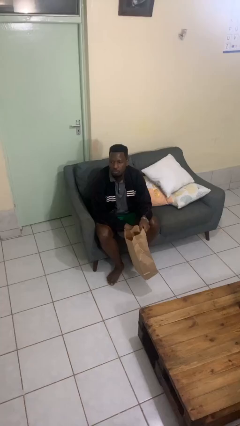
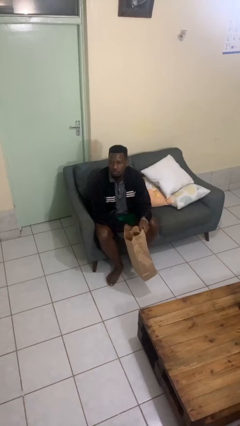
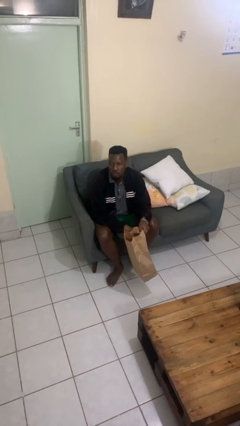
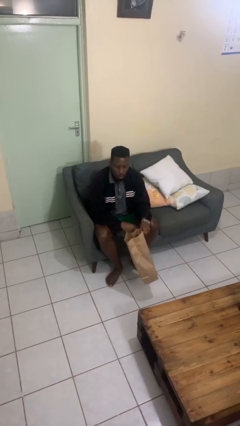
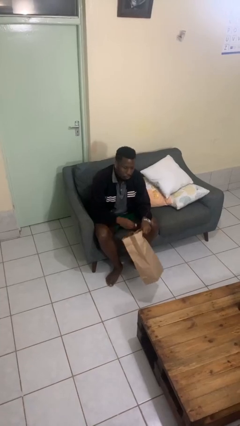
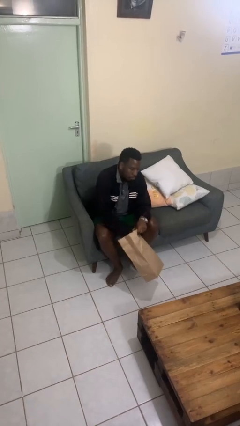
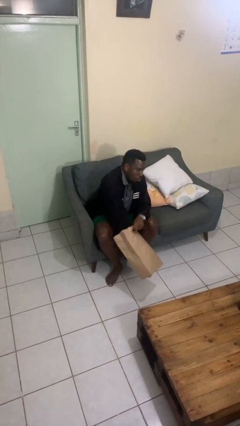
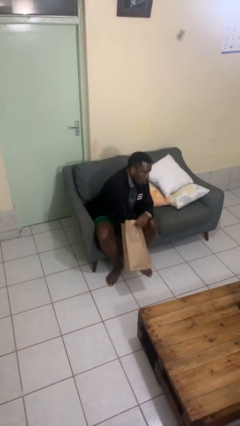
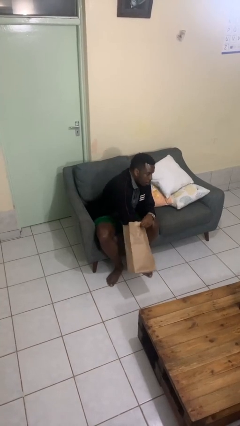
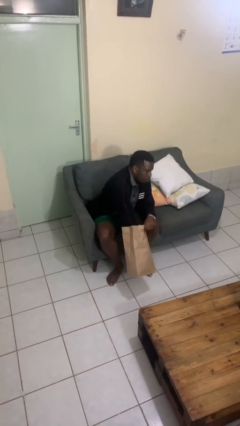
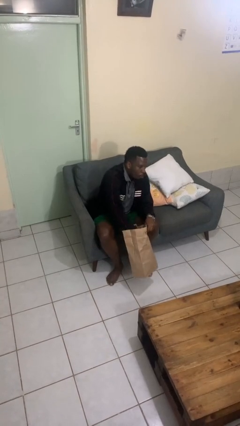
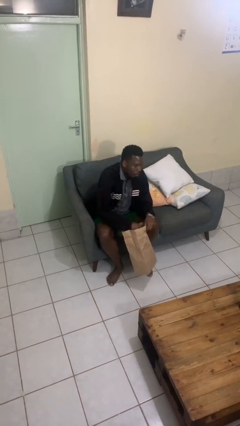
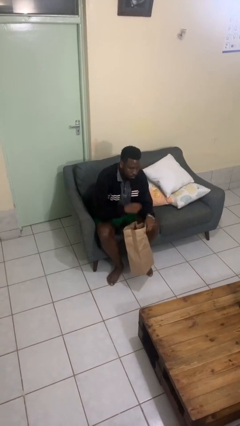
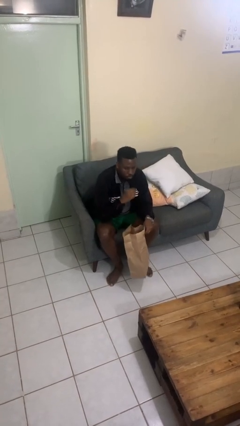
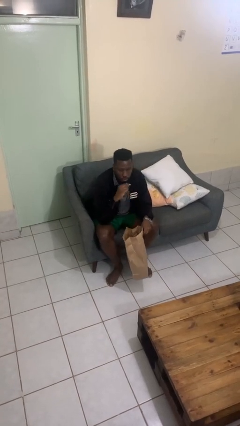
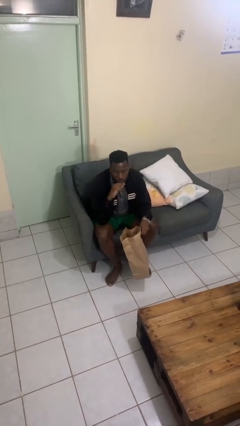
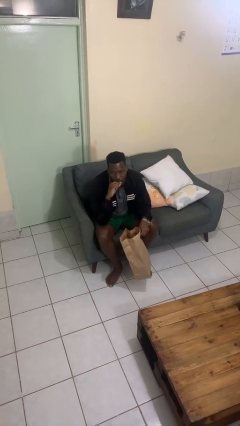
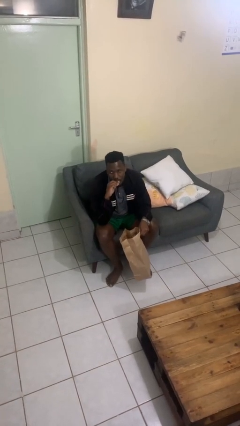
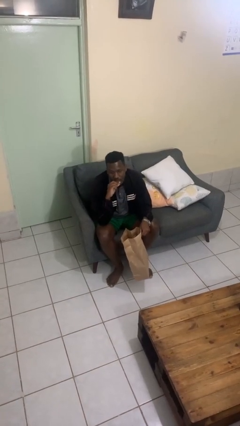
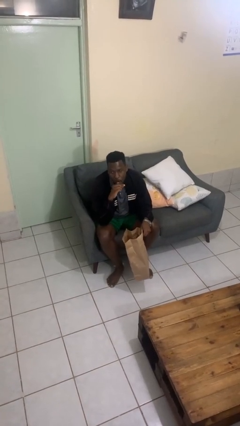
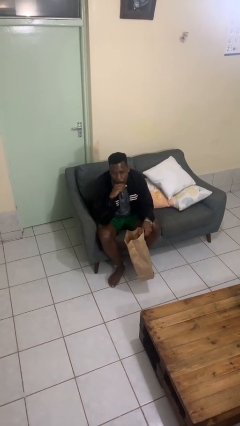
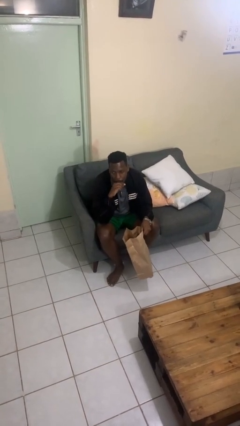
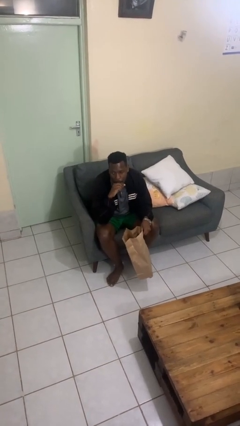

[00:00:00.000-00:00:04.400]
person eats snack from bag

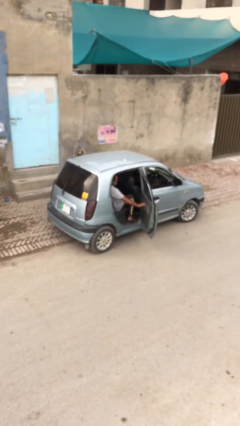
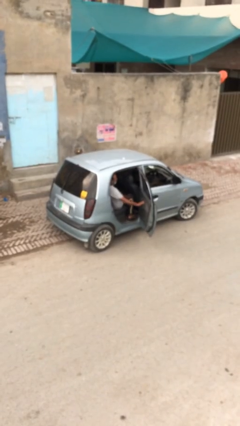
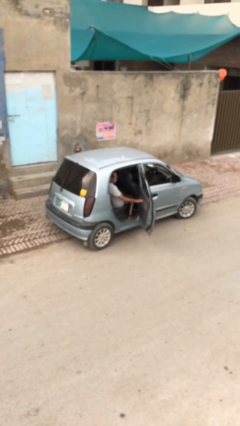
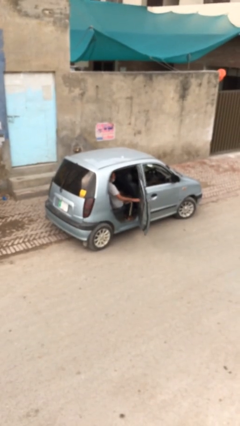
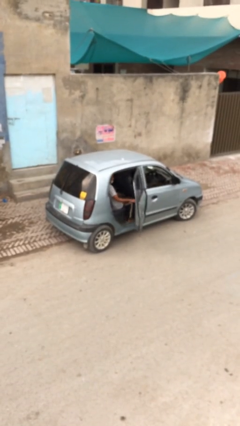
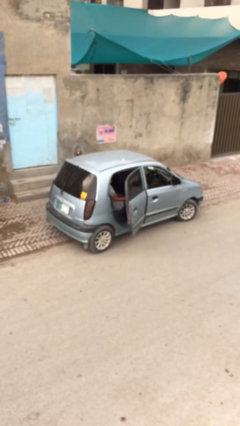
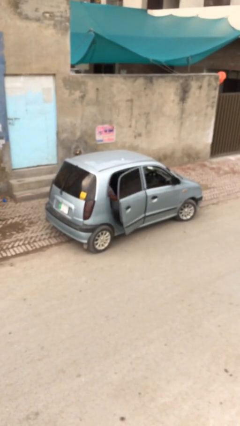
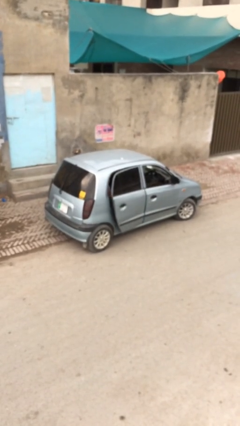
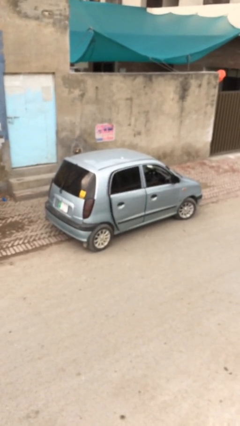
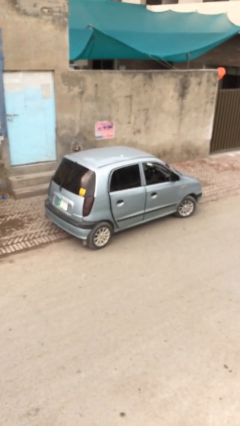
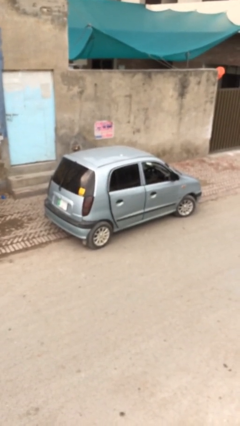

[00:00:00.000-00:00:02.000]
person closes car door

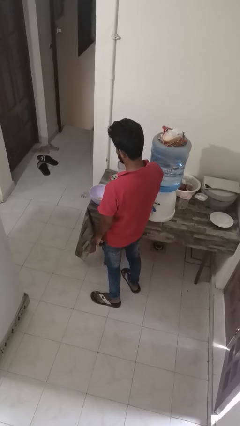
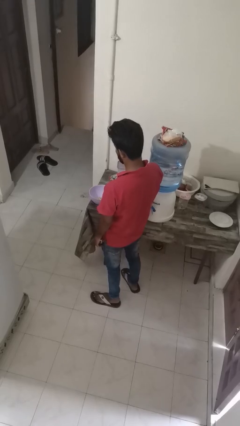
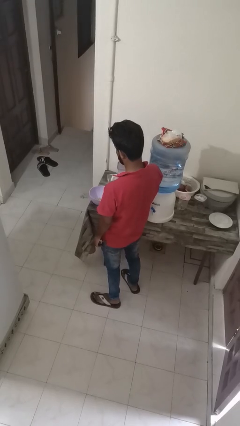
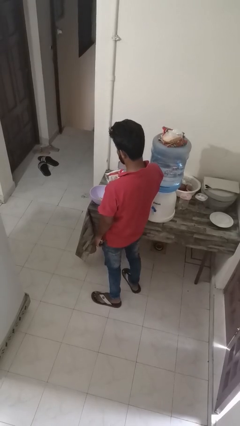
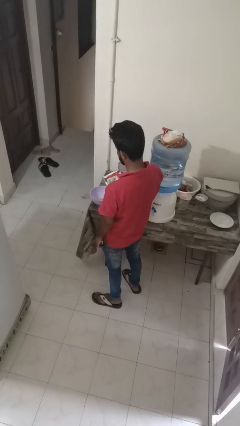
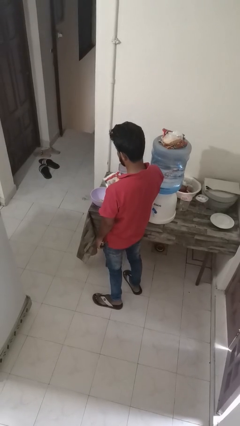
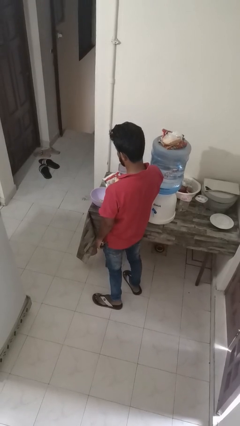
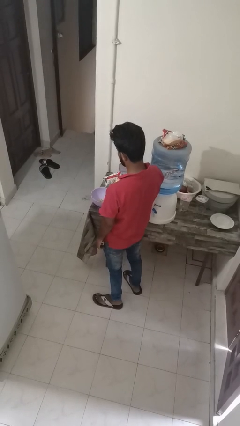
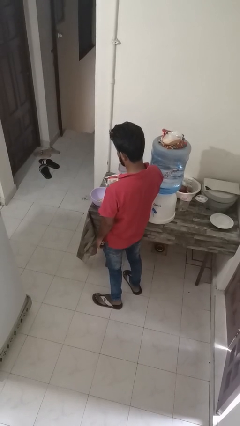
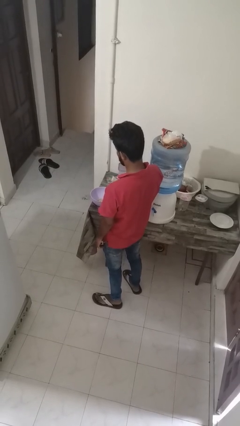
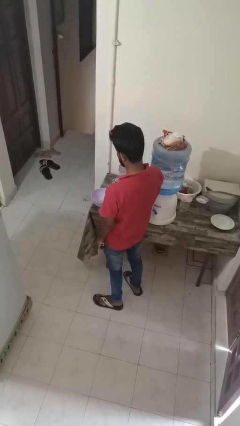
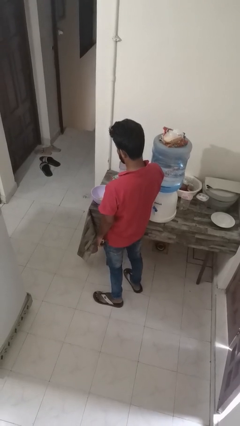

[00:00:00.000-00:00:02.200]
person pours into bowl

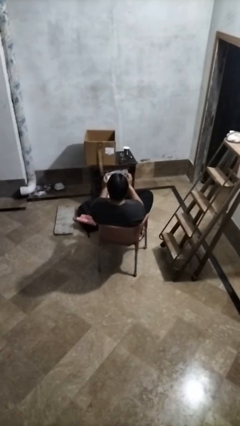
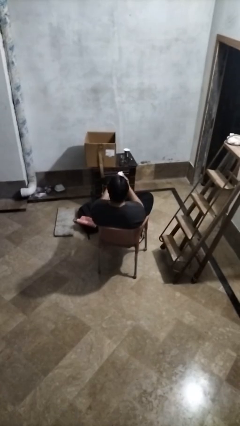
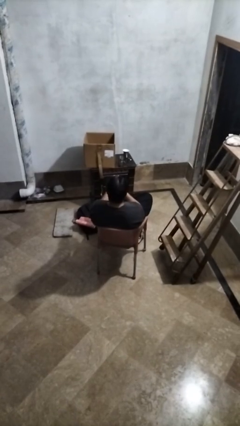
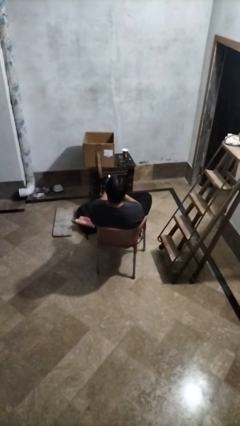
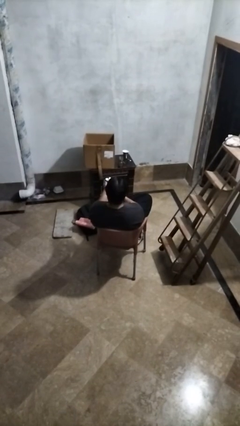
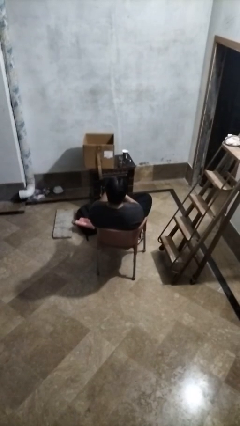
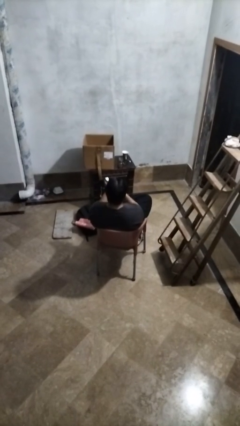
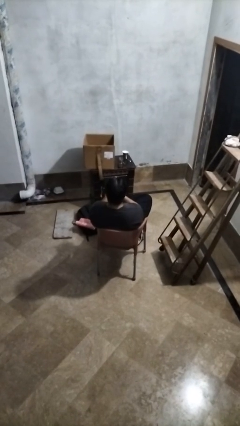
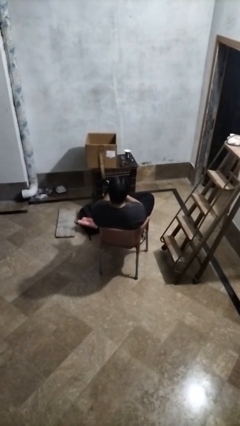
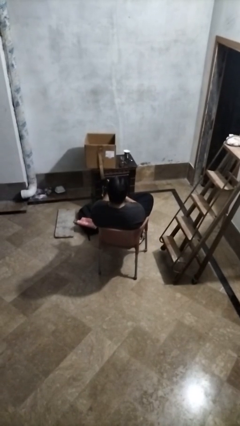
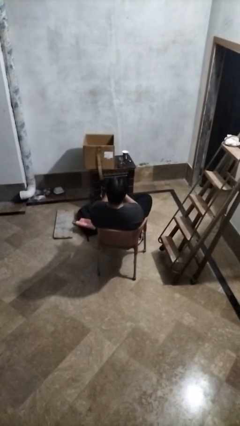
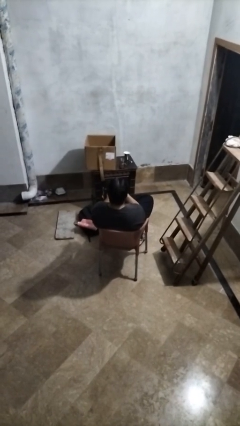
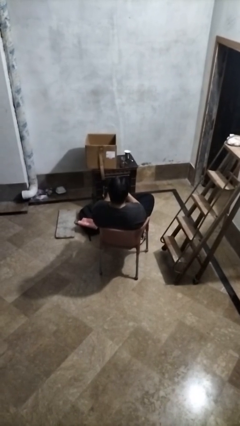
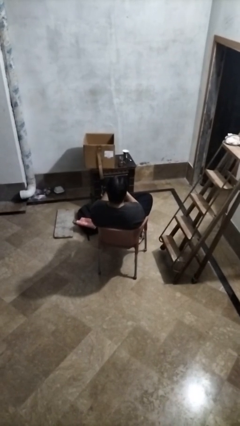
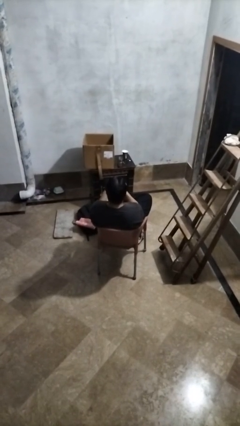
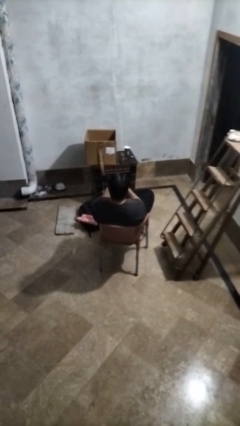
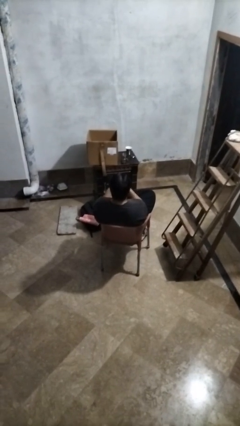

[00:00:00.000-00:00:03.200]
person crumples paper

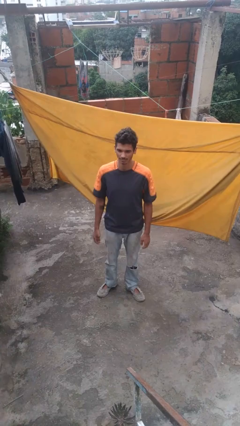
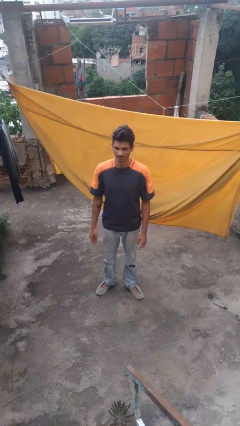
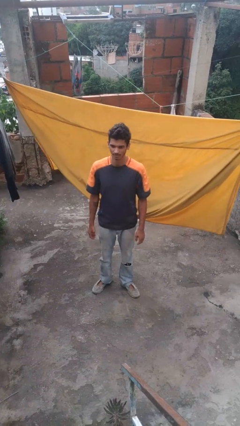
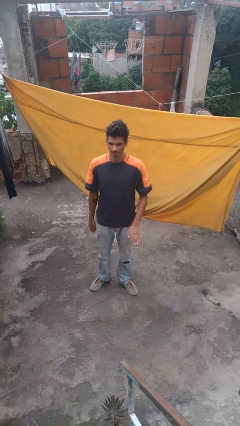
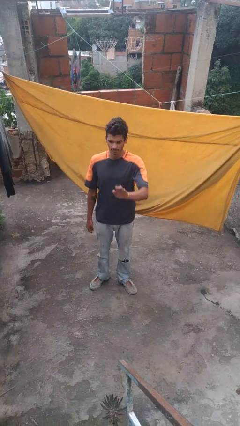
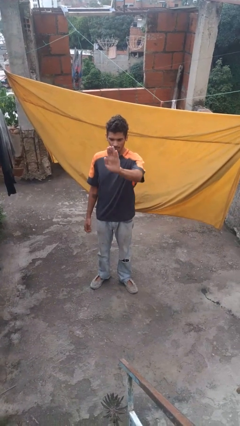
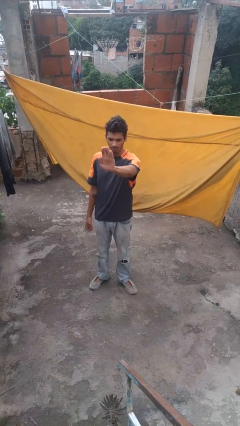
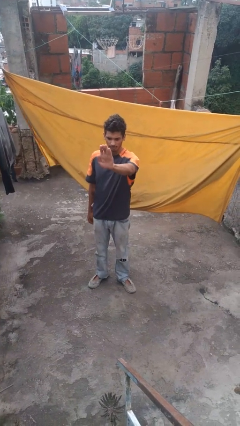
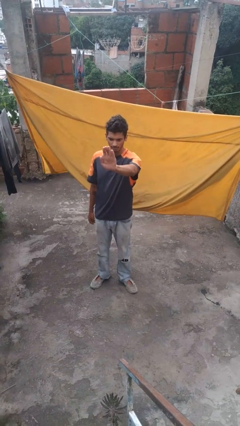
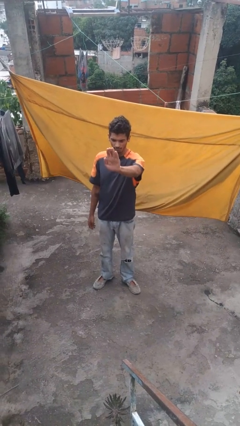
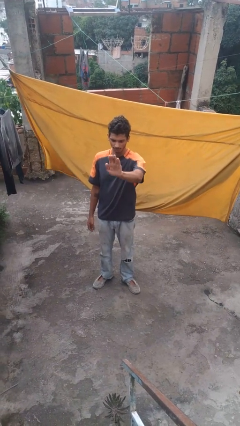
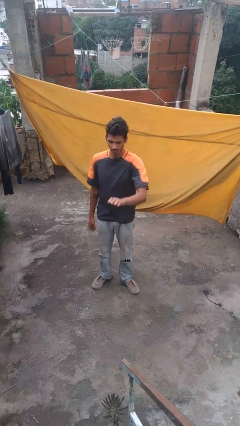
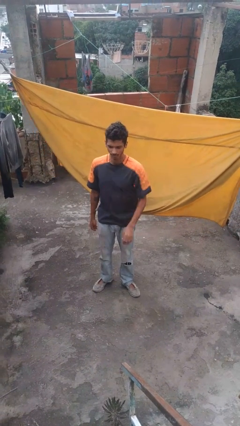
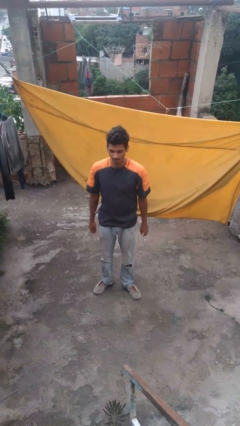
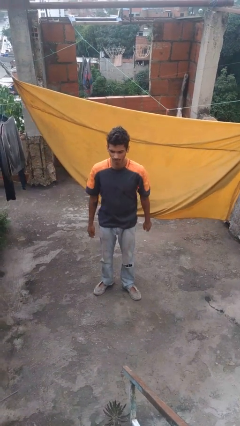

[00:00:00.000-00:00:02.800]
person gestures stop

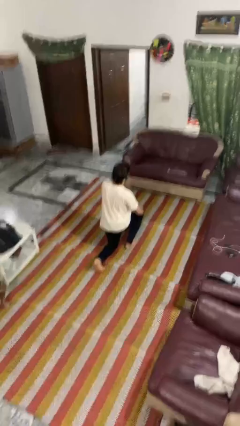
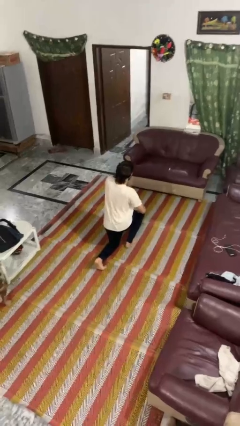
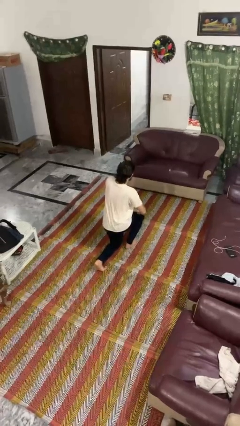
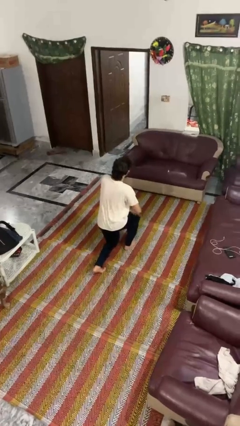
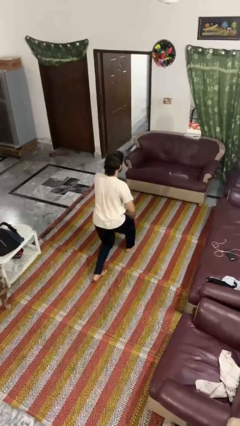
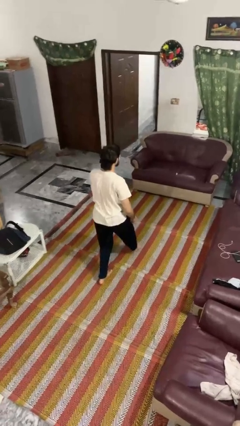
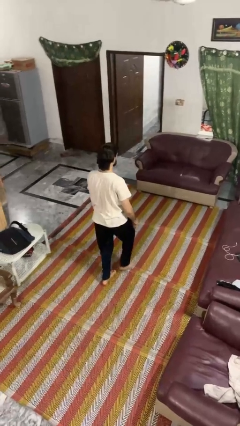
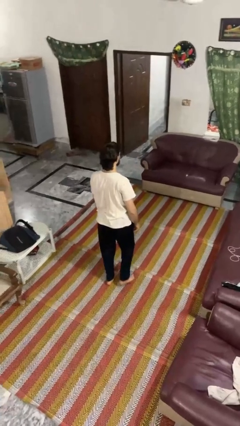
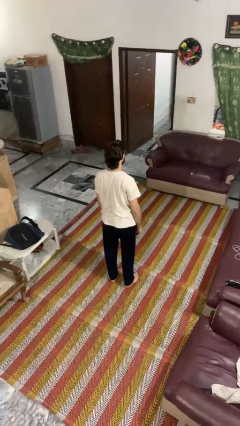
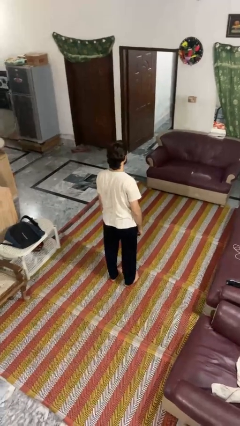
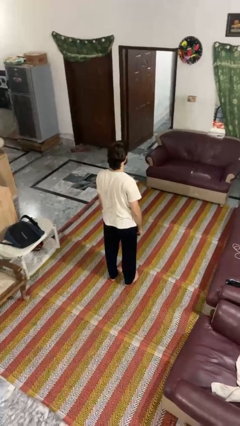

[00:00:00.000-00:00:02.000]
person stands up from floor

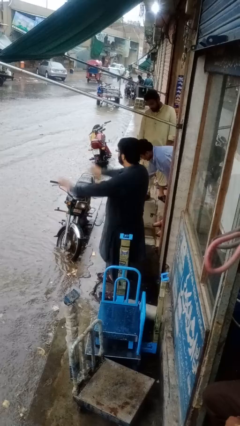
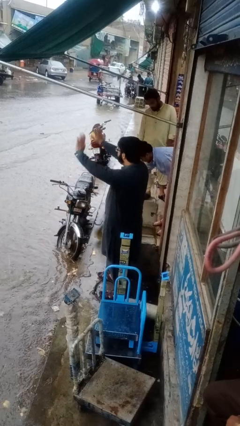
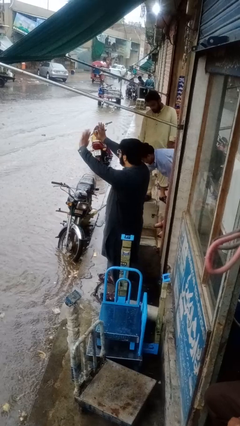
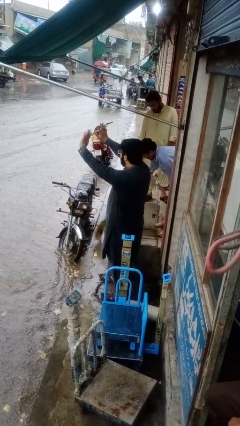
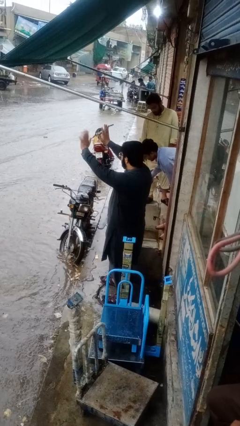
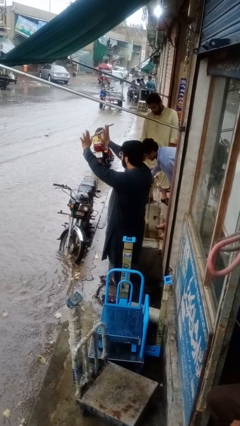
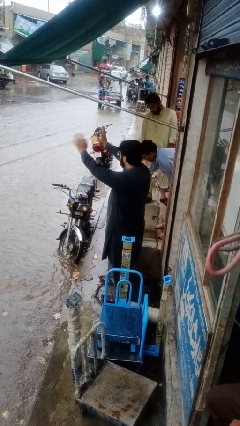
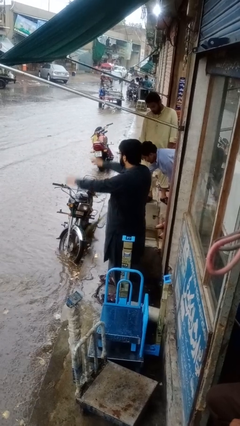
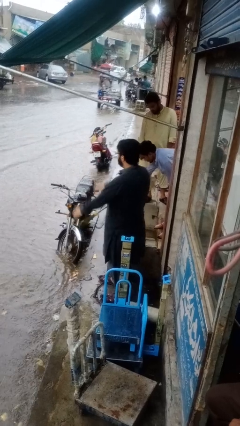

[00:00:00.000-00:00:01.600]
person waves at person
